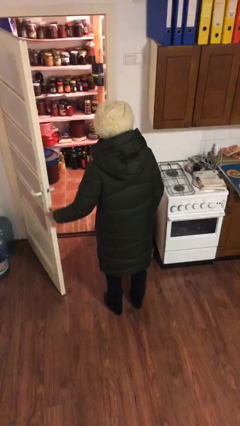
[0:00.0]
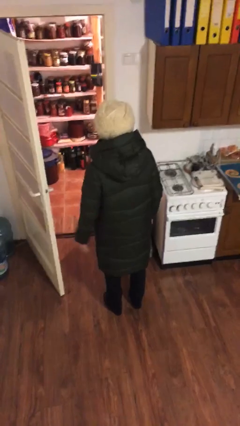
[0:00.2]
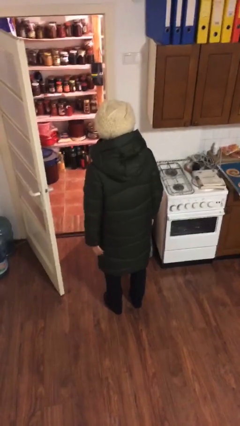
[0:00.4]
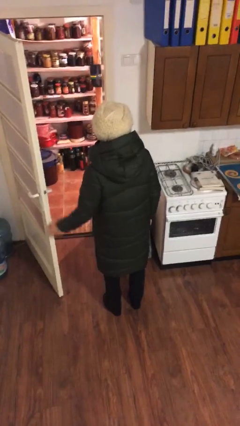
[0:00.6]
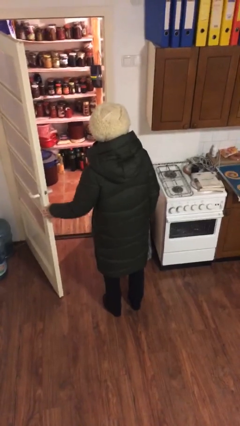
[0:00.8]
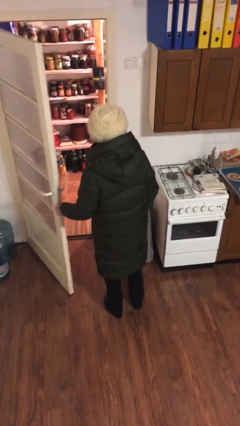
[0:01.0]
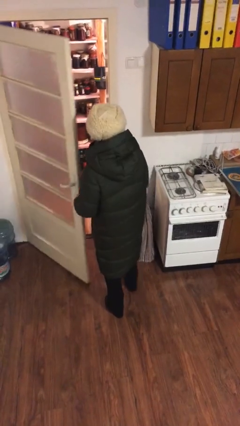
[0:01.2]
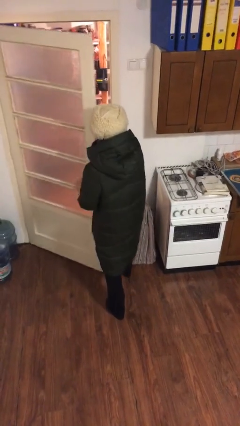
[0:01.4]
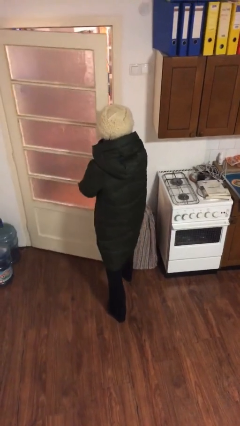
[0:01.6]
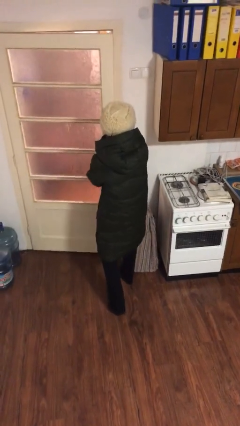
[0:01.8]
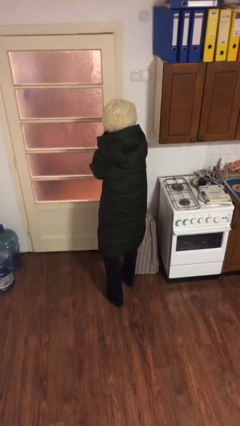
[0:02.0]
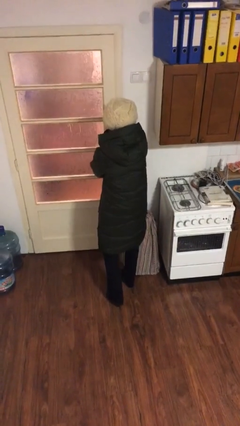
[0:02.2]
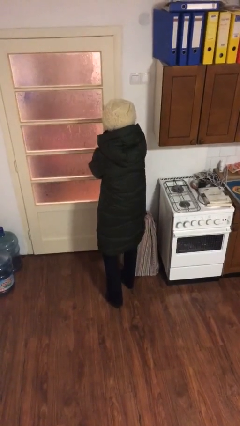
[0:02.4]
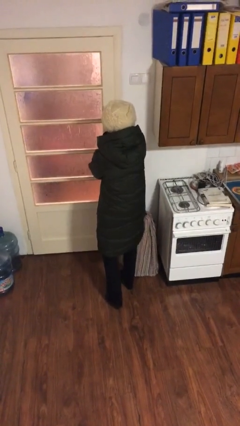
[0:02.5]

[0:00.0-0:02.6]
person closes facility door

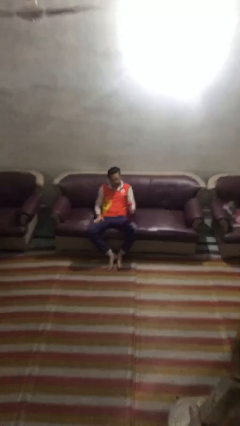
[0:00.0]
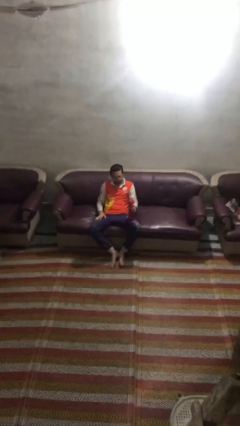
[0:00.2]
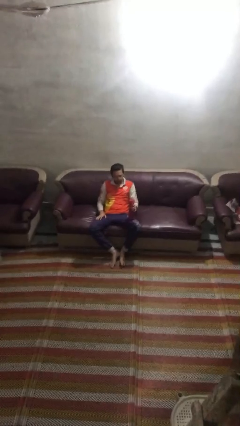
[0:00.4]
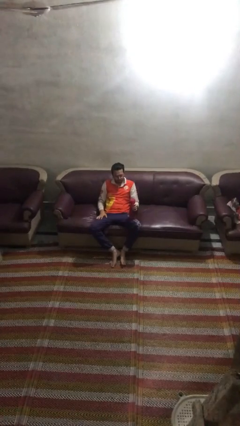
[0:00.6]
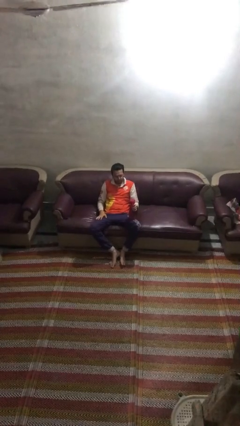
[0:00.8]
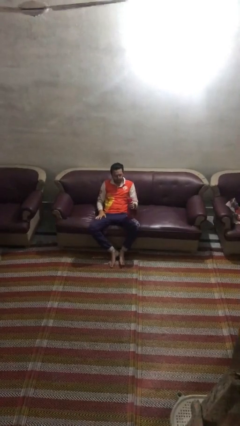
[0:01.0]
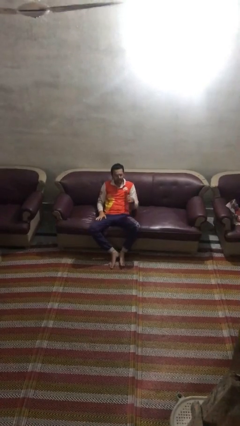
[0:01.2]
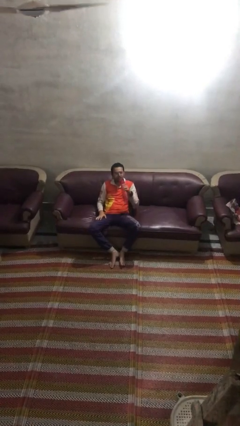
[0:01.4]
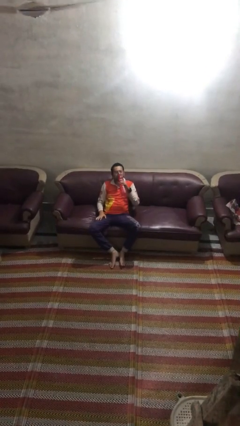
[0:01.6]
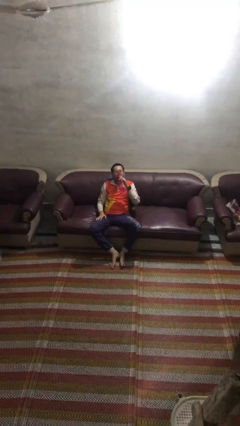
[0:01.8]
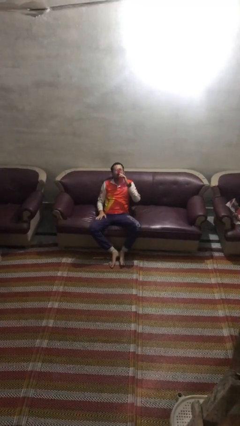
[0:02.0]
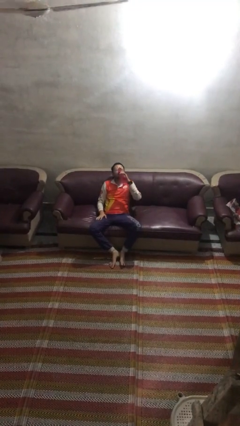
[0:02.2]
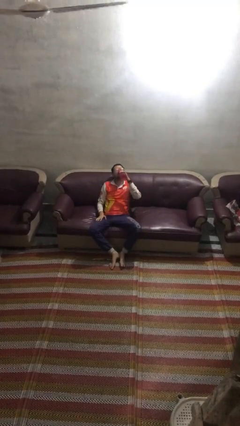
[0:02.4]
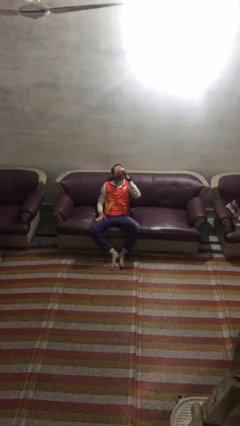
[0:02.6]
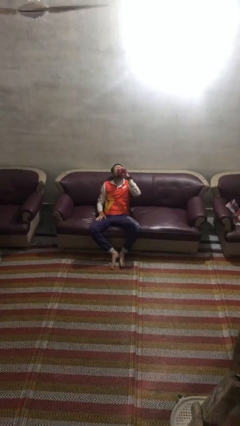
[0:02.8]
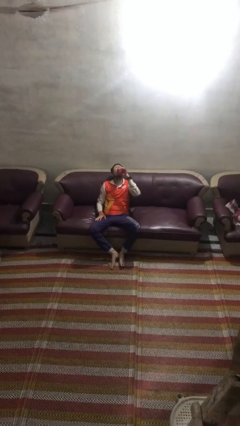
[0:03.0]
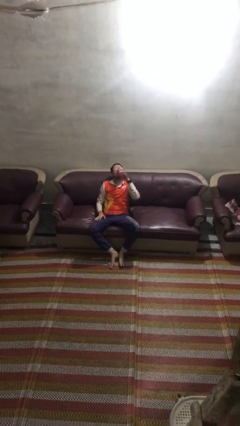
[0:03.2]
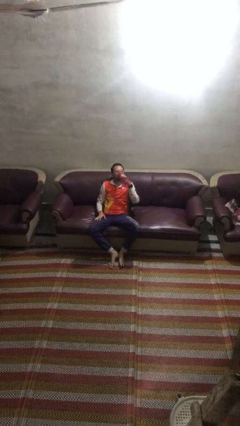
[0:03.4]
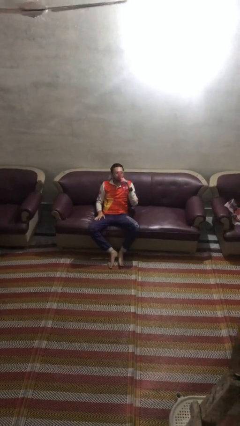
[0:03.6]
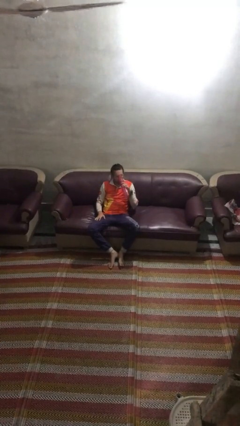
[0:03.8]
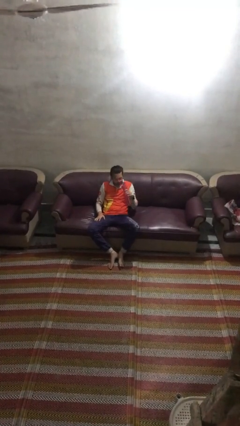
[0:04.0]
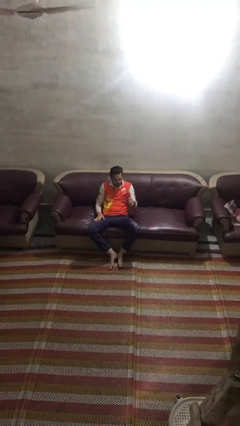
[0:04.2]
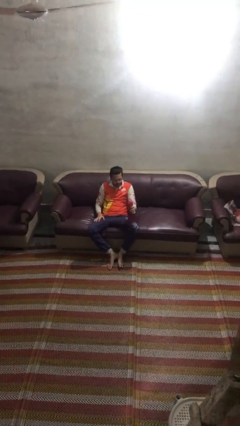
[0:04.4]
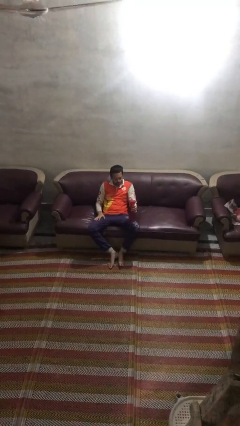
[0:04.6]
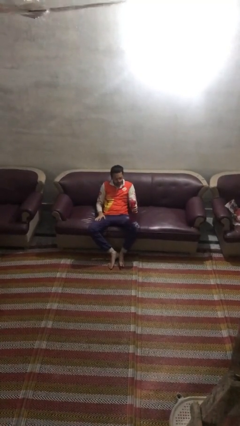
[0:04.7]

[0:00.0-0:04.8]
person drinks from bottle

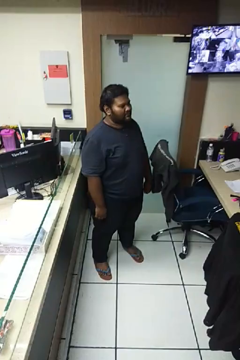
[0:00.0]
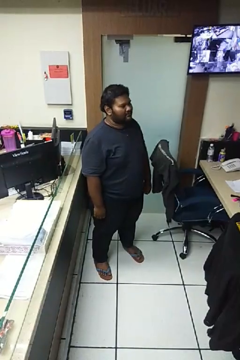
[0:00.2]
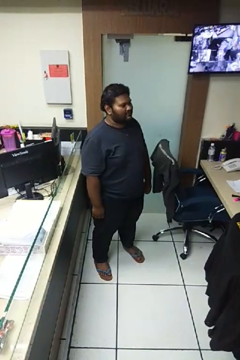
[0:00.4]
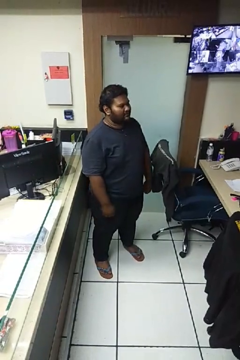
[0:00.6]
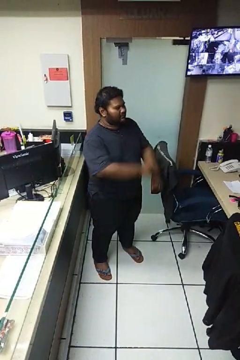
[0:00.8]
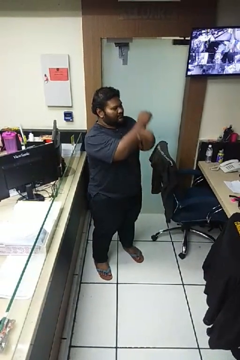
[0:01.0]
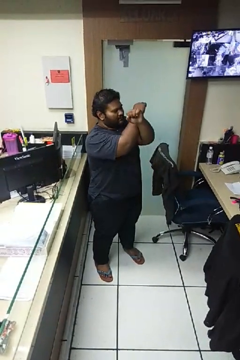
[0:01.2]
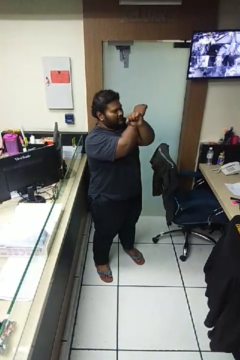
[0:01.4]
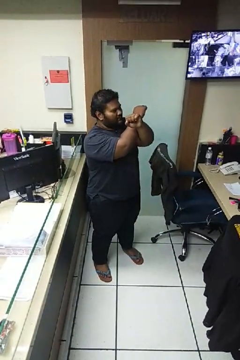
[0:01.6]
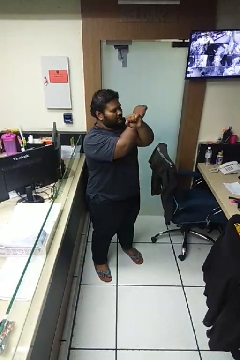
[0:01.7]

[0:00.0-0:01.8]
person gestures arms x

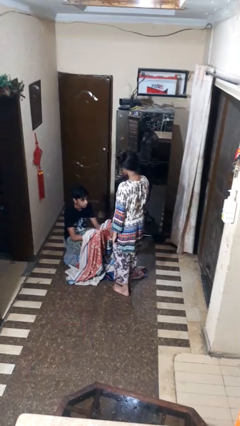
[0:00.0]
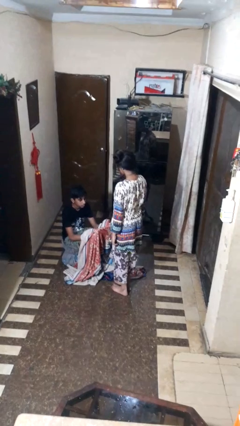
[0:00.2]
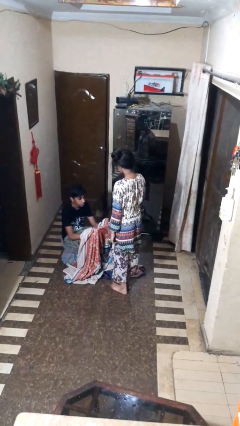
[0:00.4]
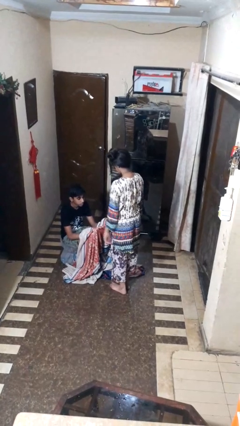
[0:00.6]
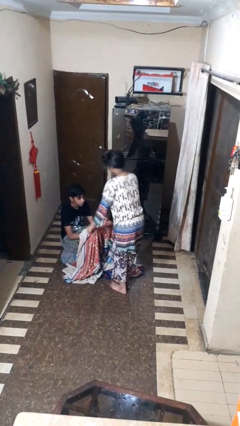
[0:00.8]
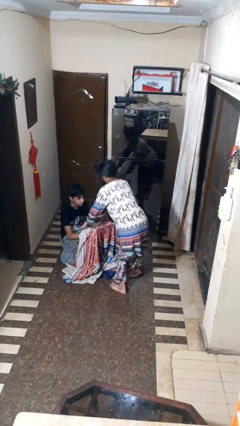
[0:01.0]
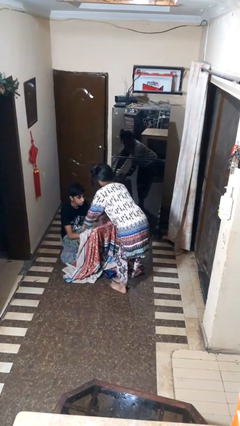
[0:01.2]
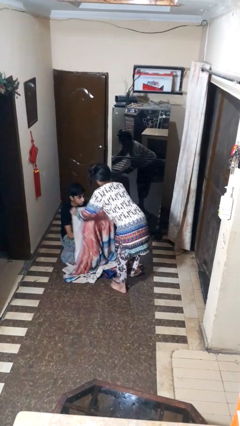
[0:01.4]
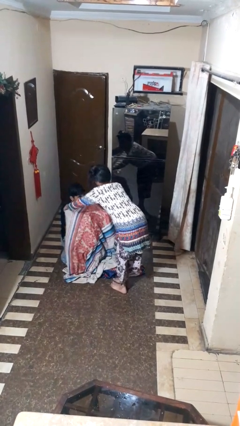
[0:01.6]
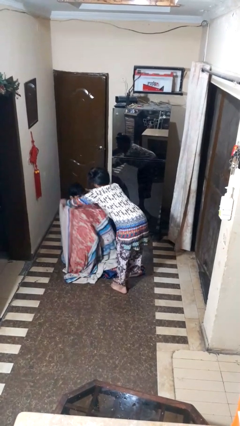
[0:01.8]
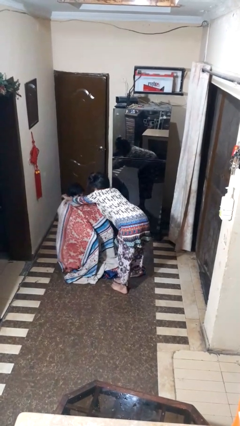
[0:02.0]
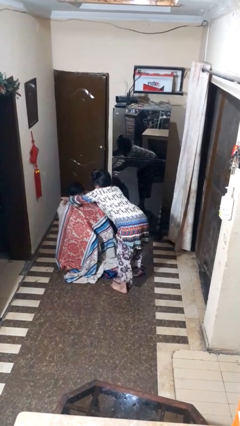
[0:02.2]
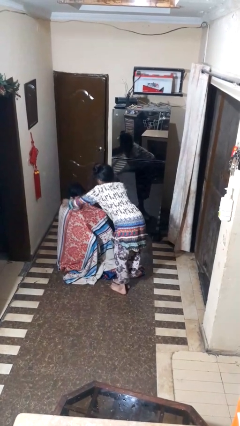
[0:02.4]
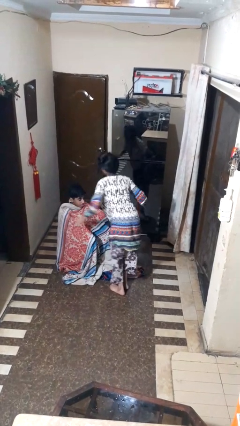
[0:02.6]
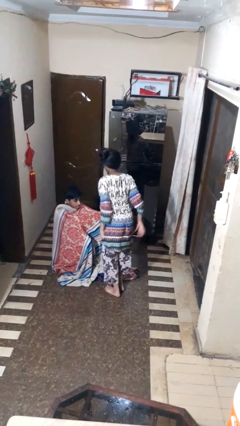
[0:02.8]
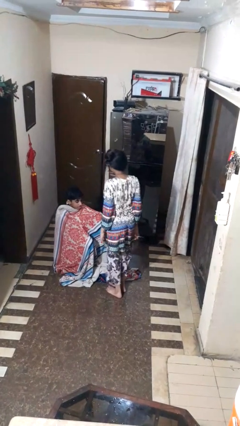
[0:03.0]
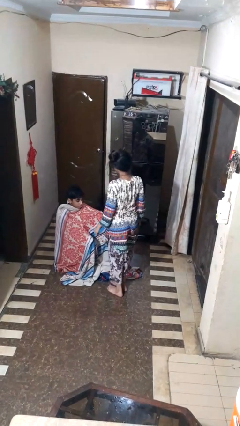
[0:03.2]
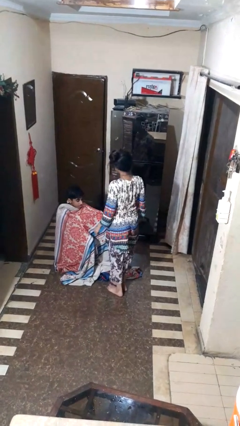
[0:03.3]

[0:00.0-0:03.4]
person covers friend with blanket

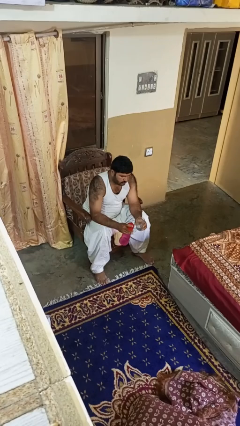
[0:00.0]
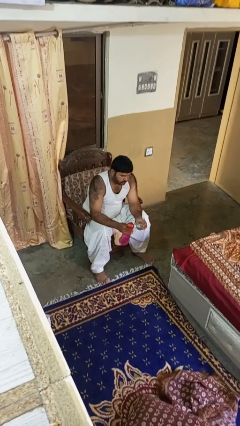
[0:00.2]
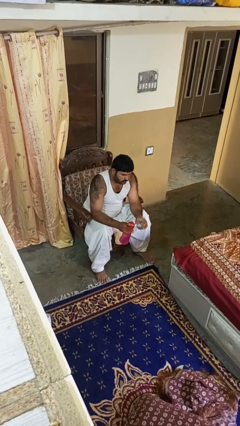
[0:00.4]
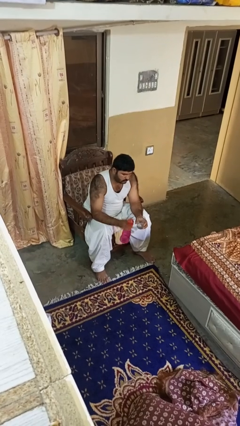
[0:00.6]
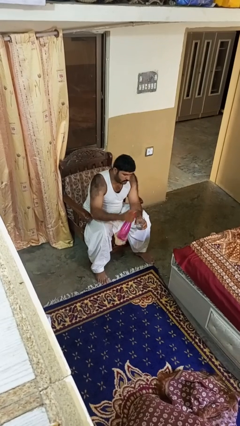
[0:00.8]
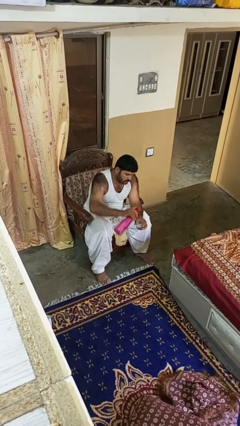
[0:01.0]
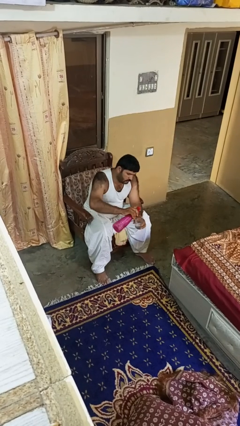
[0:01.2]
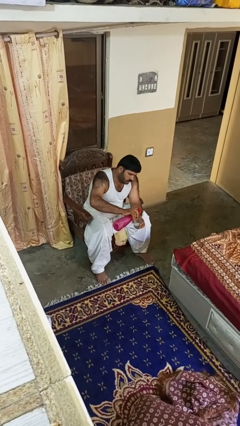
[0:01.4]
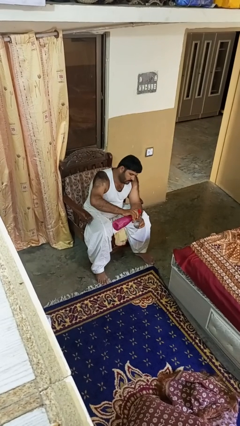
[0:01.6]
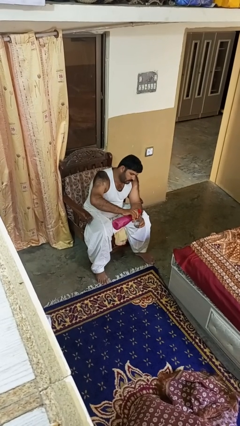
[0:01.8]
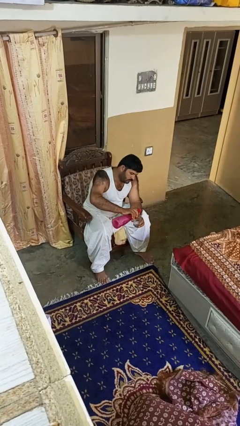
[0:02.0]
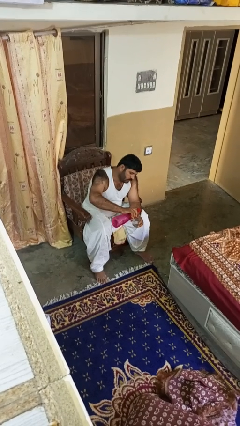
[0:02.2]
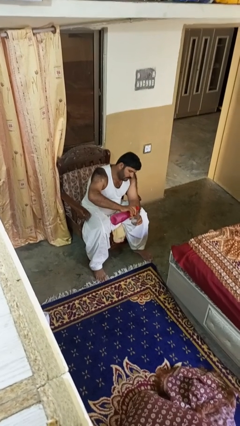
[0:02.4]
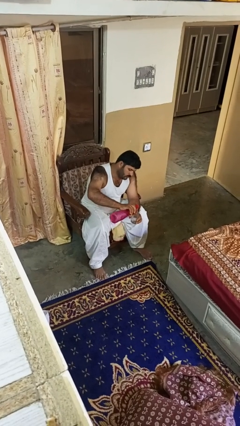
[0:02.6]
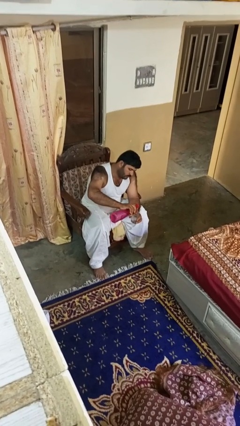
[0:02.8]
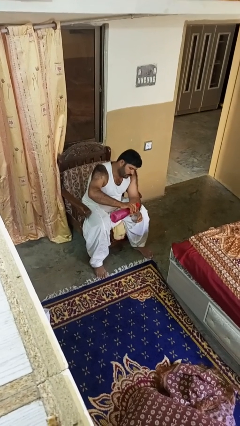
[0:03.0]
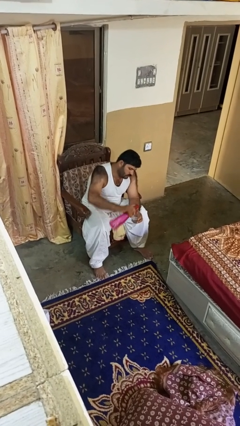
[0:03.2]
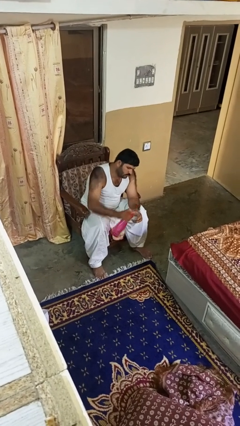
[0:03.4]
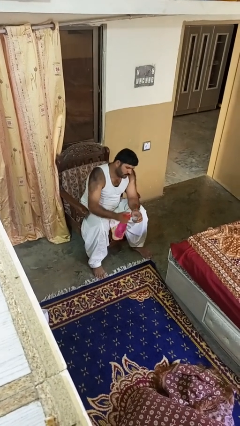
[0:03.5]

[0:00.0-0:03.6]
person pours liquid into cup

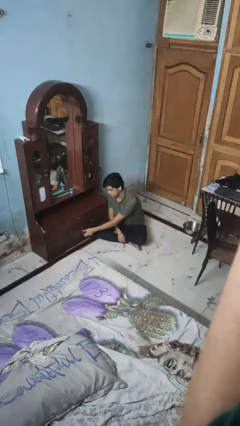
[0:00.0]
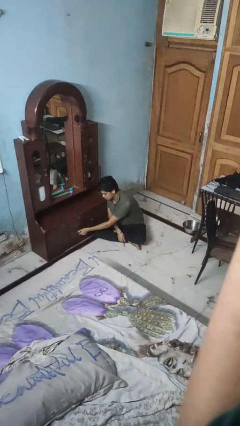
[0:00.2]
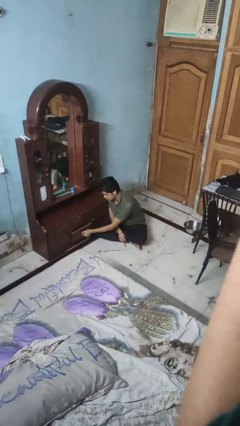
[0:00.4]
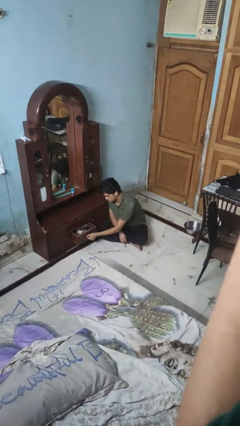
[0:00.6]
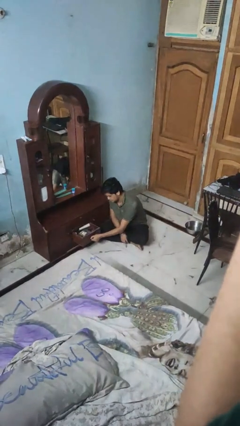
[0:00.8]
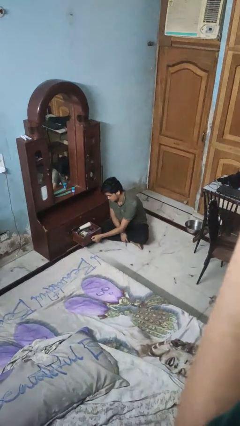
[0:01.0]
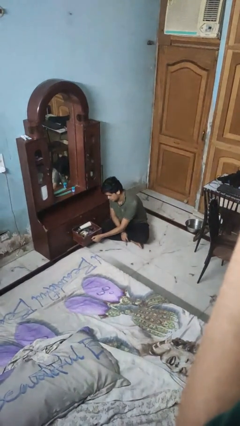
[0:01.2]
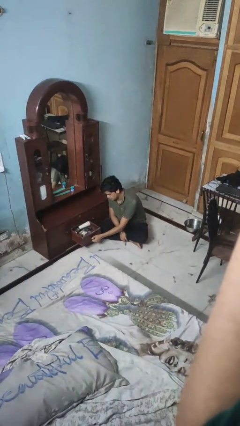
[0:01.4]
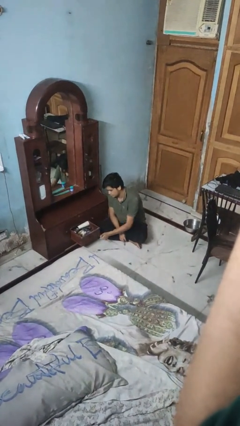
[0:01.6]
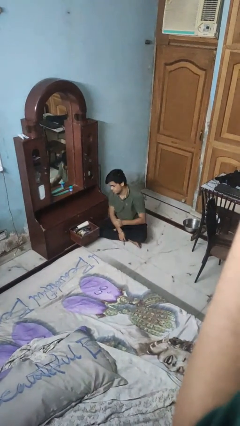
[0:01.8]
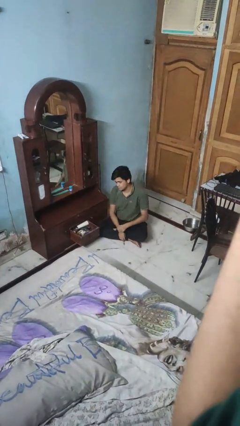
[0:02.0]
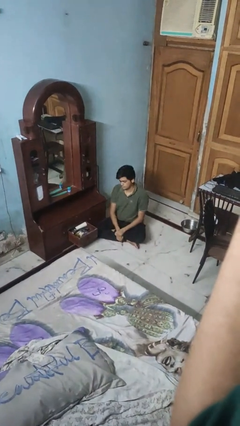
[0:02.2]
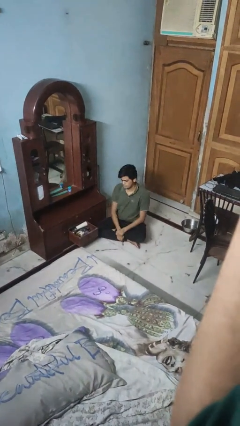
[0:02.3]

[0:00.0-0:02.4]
person opens dresser drawer
